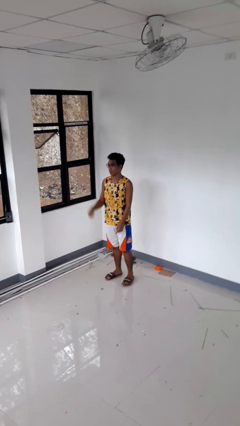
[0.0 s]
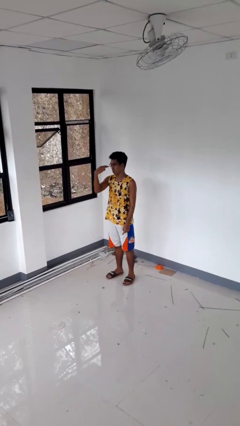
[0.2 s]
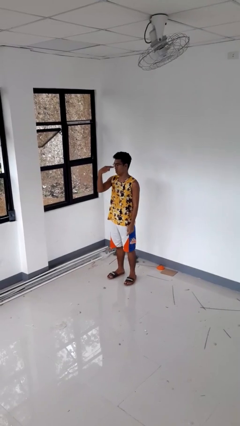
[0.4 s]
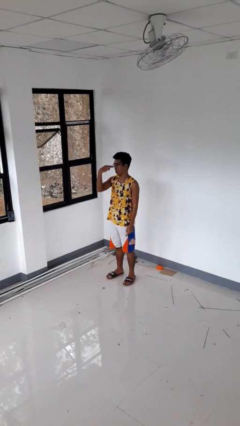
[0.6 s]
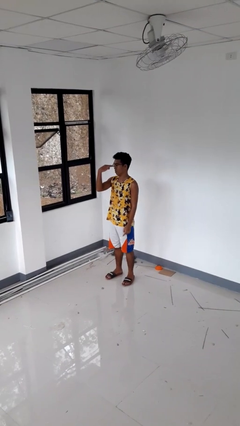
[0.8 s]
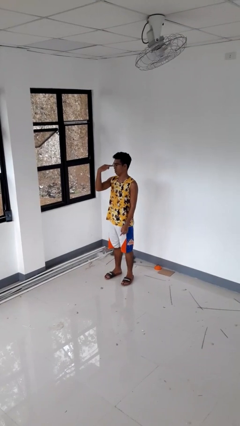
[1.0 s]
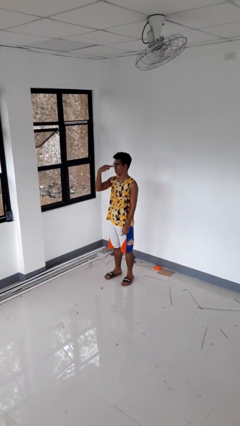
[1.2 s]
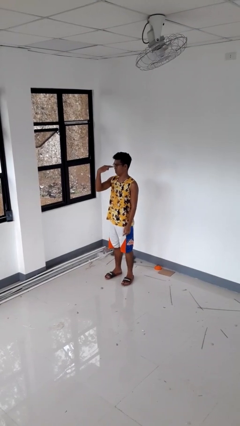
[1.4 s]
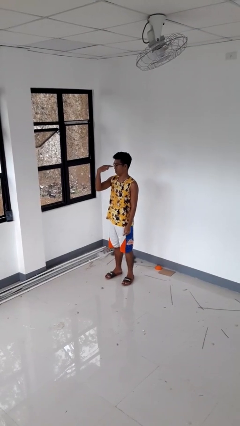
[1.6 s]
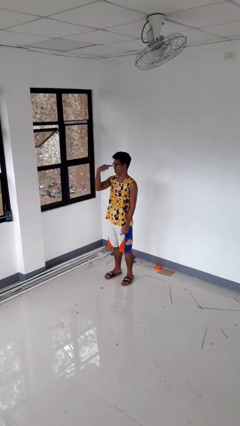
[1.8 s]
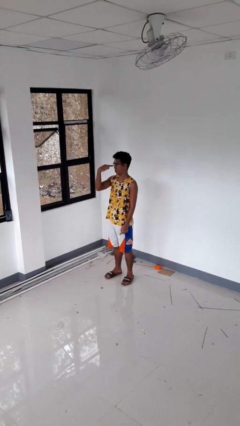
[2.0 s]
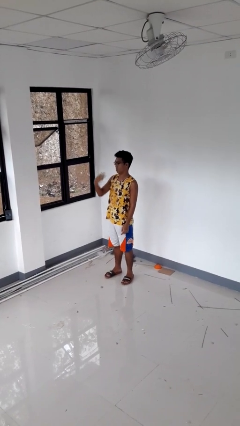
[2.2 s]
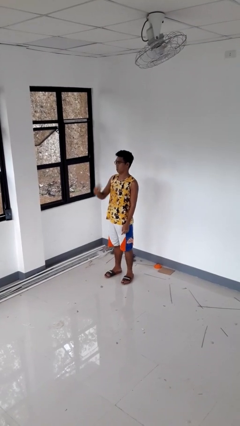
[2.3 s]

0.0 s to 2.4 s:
person gestures watch closely

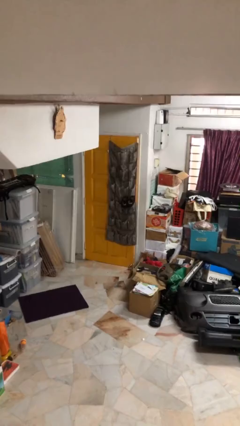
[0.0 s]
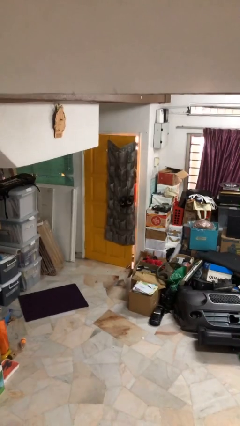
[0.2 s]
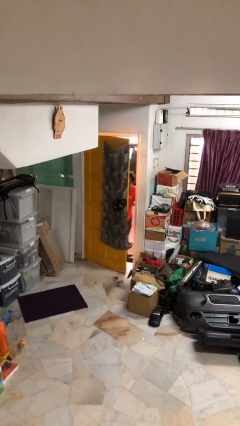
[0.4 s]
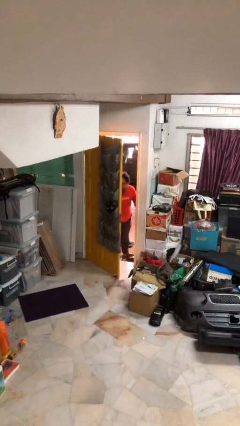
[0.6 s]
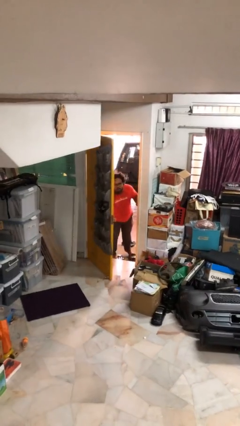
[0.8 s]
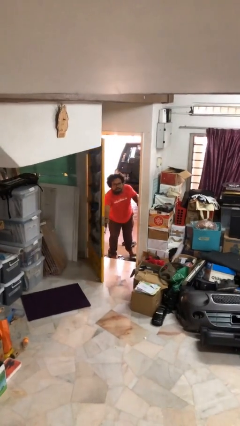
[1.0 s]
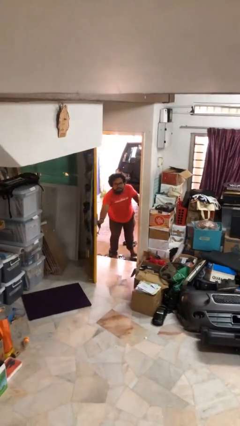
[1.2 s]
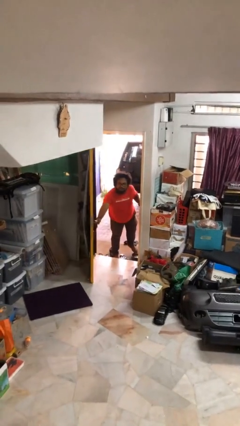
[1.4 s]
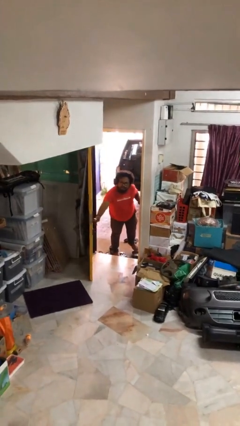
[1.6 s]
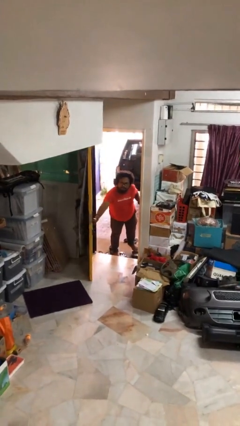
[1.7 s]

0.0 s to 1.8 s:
person opens facility door

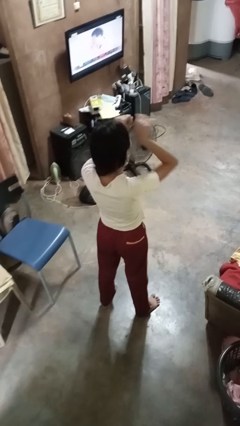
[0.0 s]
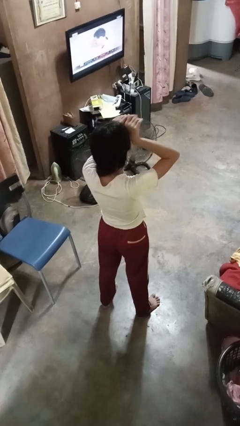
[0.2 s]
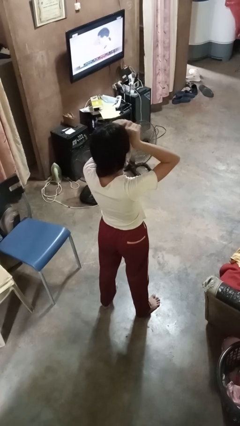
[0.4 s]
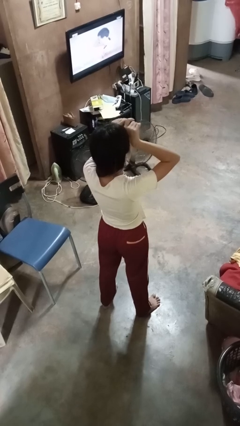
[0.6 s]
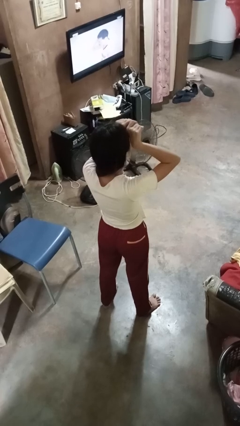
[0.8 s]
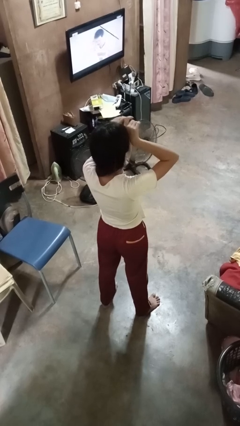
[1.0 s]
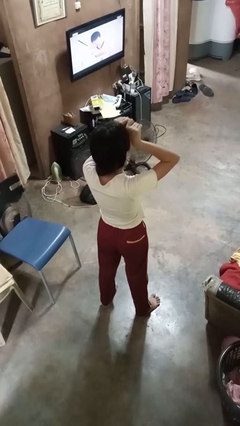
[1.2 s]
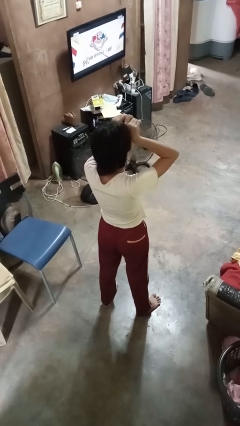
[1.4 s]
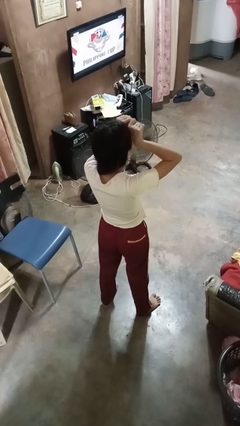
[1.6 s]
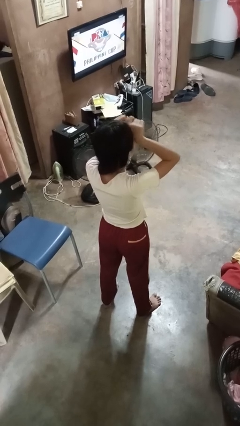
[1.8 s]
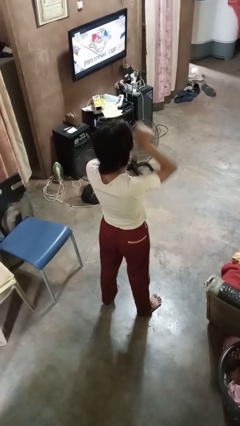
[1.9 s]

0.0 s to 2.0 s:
person rubs eyes

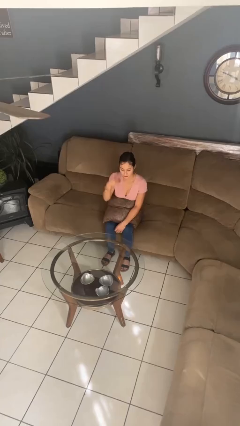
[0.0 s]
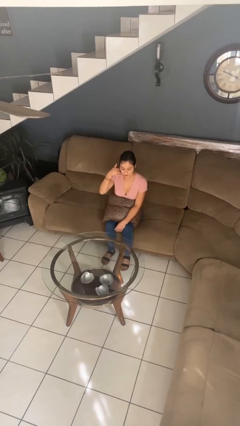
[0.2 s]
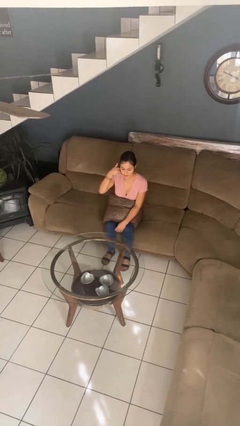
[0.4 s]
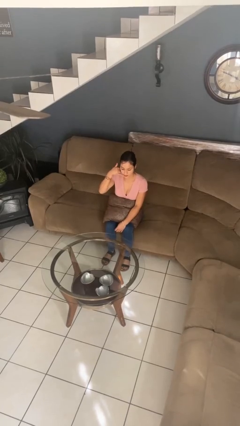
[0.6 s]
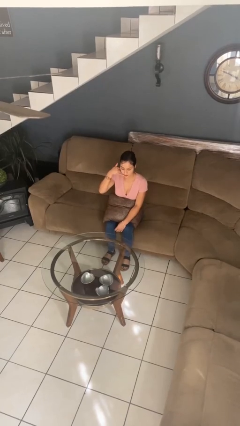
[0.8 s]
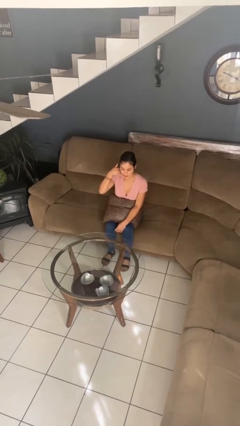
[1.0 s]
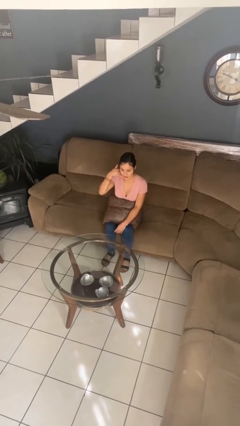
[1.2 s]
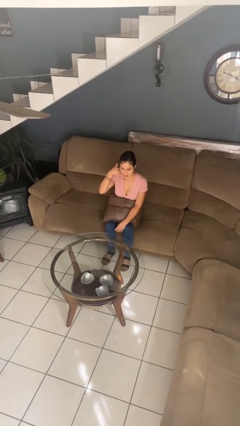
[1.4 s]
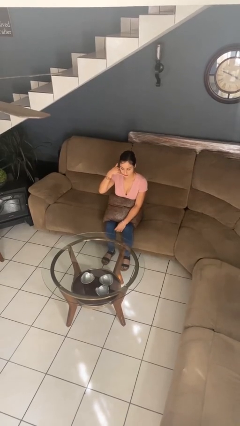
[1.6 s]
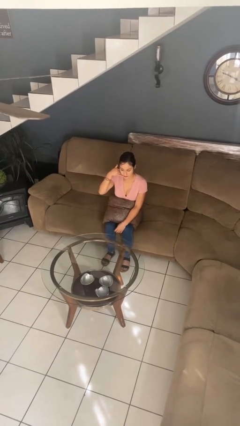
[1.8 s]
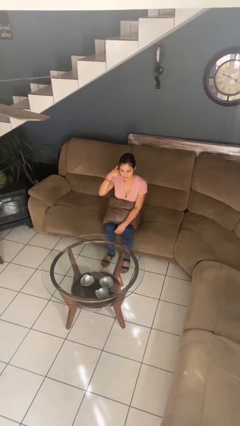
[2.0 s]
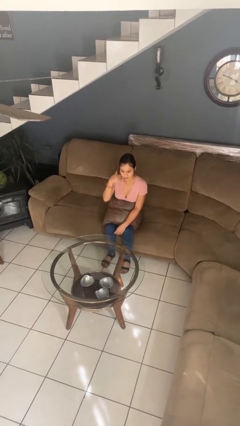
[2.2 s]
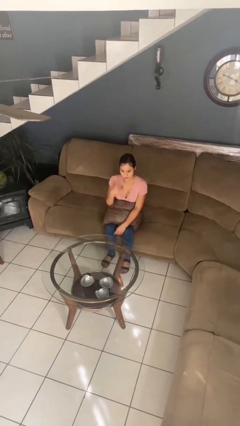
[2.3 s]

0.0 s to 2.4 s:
person gestures call me

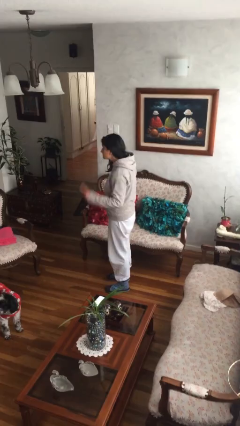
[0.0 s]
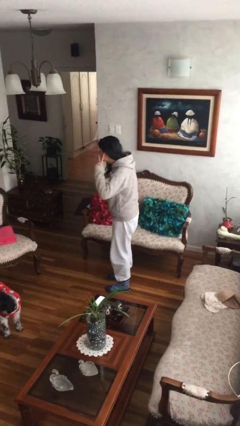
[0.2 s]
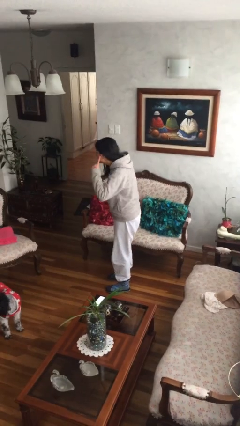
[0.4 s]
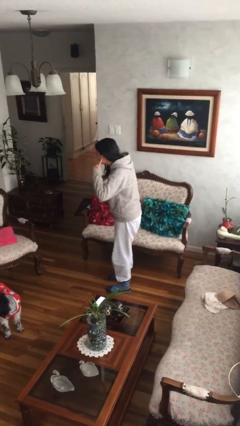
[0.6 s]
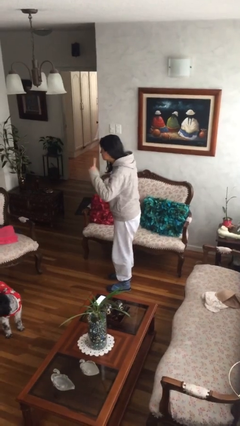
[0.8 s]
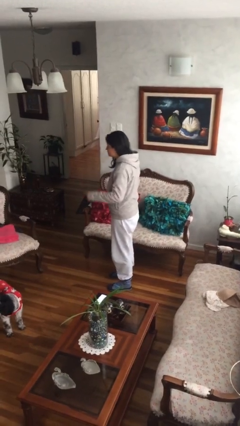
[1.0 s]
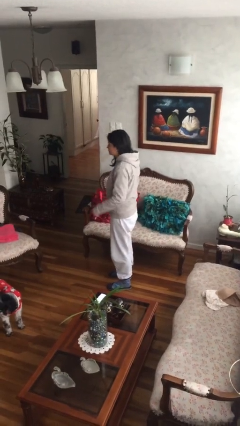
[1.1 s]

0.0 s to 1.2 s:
person gestures listen closely

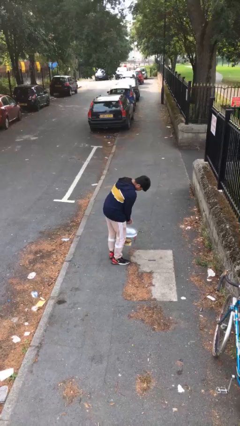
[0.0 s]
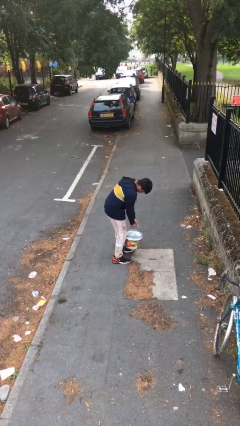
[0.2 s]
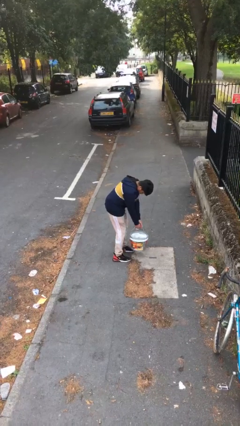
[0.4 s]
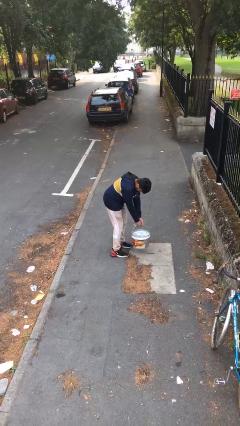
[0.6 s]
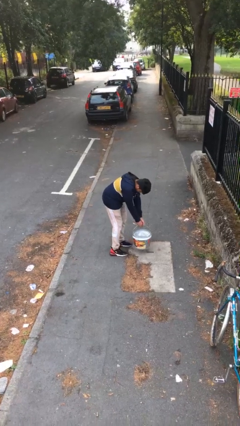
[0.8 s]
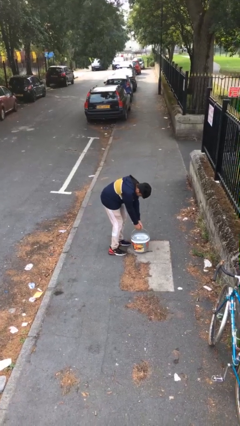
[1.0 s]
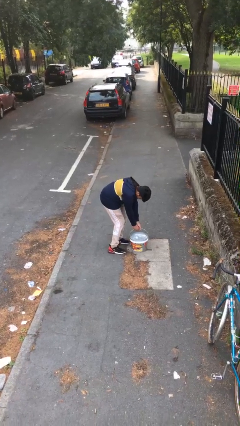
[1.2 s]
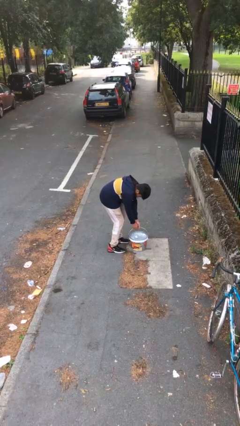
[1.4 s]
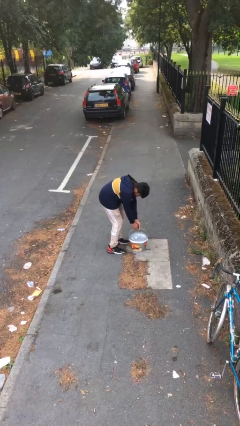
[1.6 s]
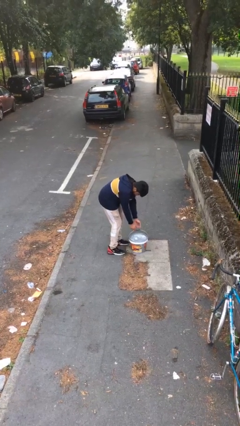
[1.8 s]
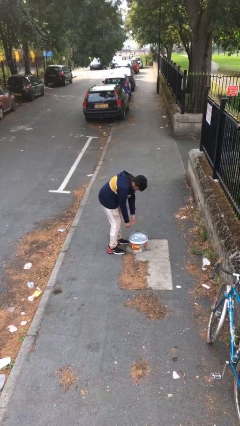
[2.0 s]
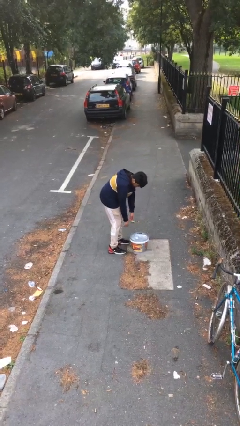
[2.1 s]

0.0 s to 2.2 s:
person puts down object on floor

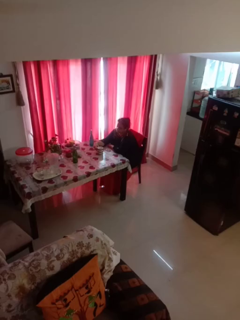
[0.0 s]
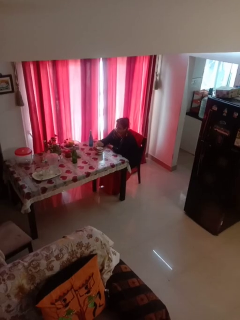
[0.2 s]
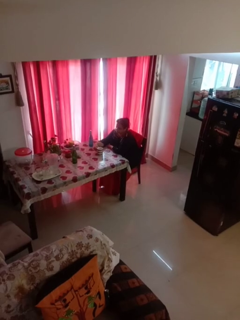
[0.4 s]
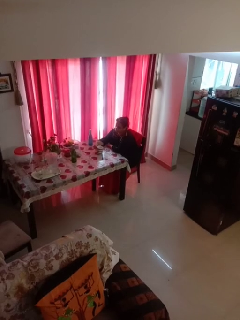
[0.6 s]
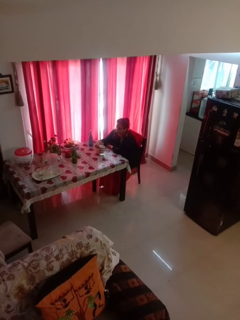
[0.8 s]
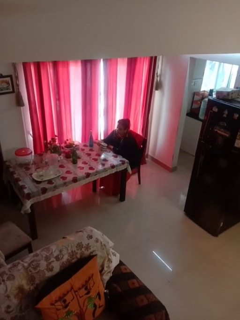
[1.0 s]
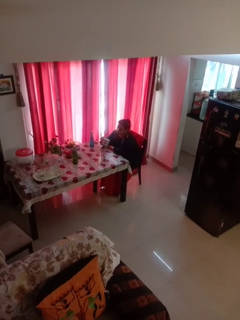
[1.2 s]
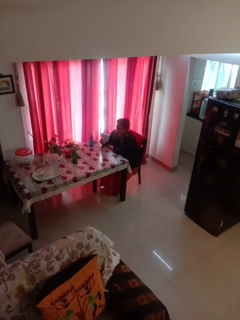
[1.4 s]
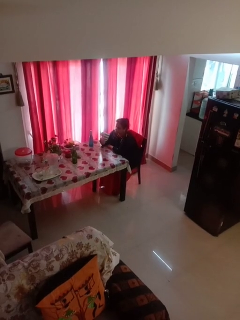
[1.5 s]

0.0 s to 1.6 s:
person picks up object from table

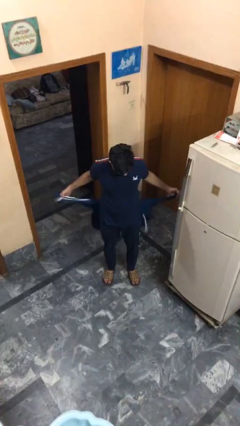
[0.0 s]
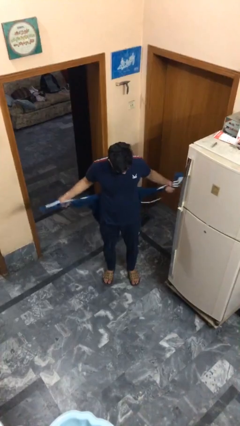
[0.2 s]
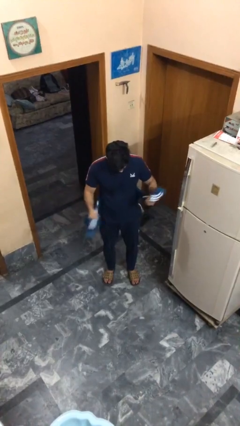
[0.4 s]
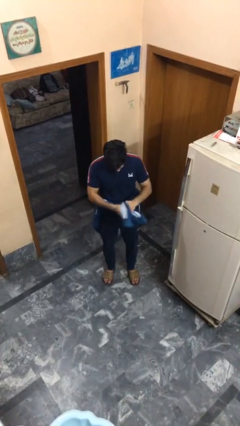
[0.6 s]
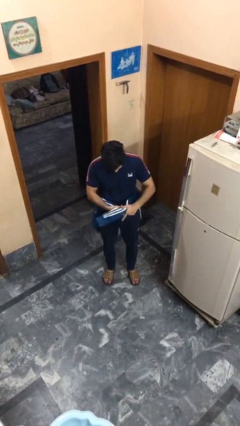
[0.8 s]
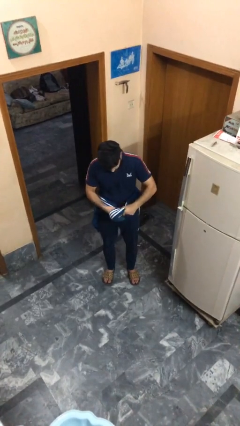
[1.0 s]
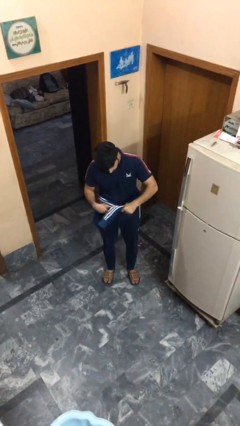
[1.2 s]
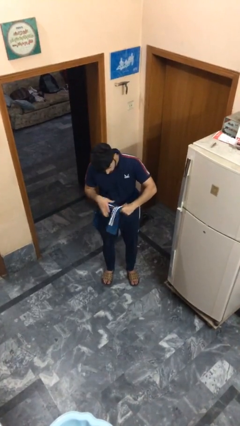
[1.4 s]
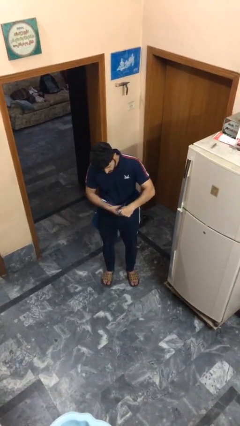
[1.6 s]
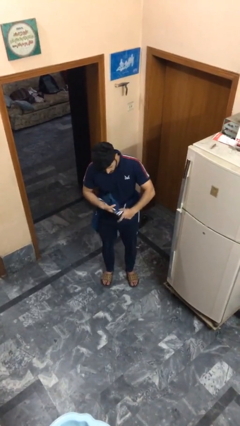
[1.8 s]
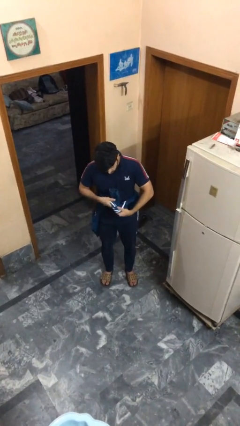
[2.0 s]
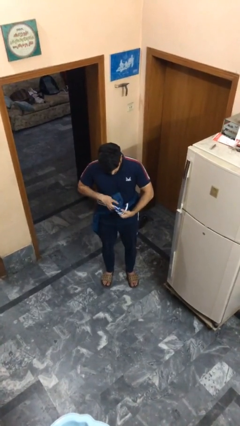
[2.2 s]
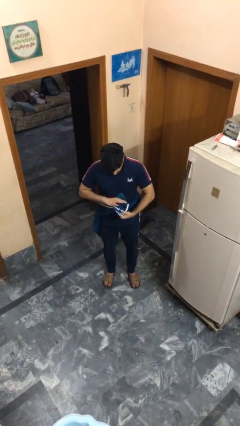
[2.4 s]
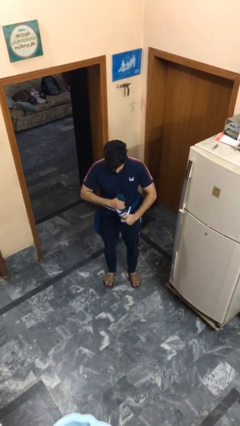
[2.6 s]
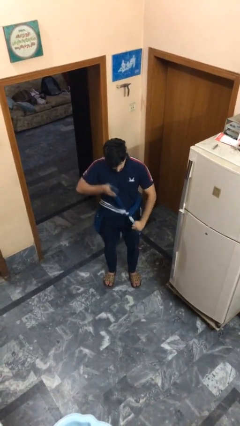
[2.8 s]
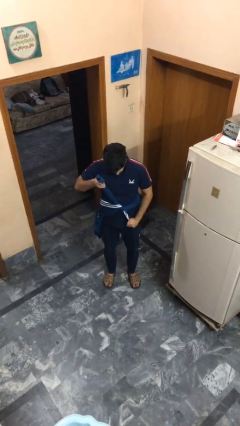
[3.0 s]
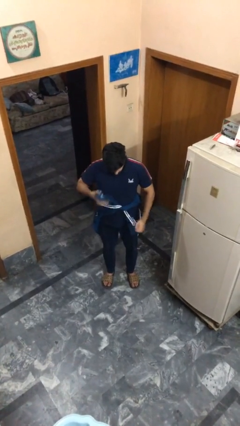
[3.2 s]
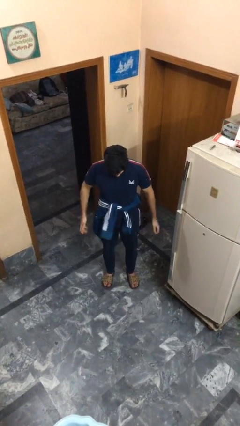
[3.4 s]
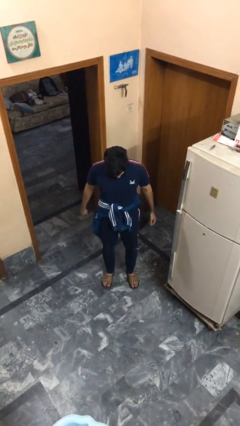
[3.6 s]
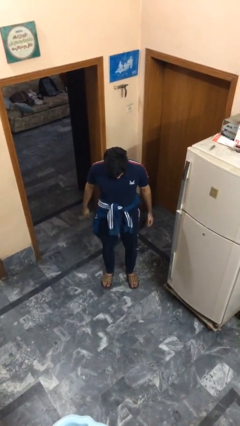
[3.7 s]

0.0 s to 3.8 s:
person ties jacket around waist

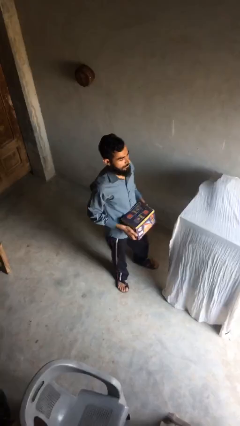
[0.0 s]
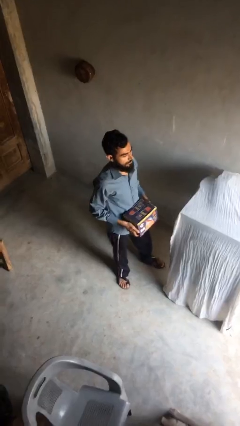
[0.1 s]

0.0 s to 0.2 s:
person puts down object on shelf
